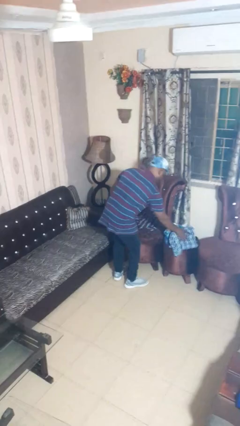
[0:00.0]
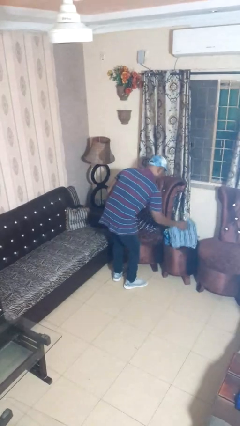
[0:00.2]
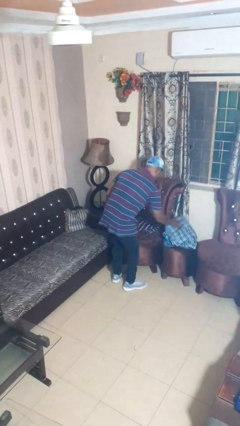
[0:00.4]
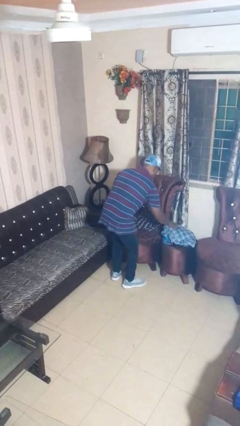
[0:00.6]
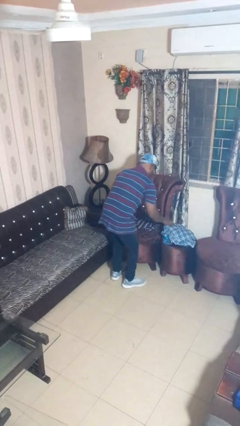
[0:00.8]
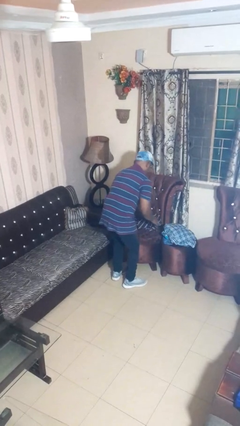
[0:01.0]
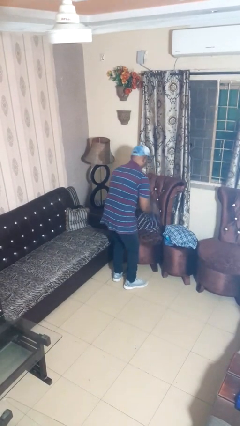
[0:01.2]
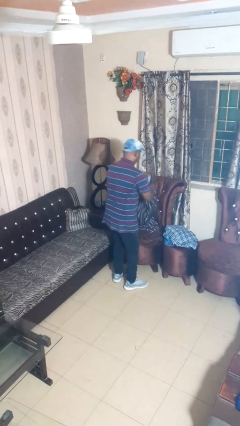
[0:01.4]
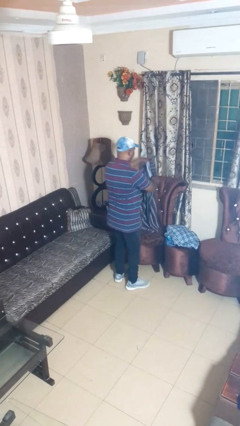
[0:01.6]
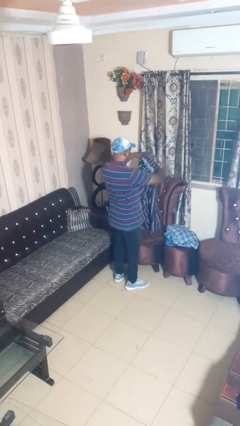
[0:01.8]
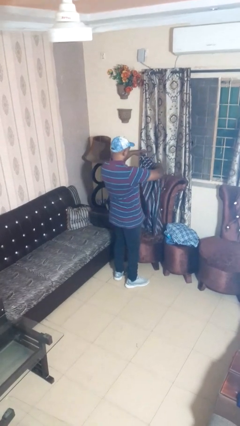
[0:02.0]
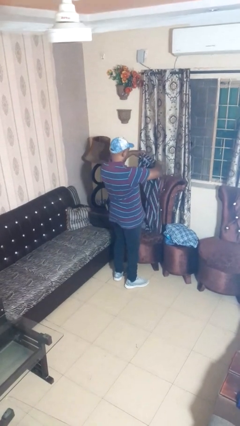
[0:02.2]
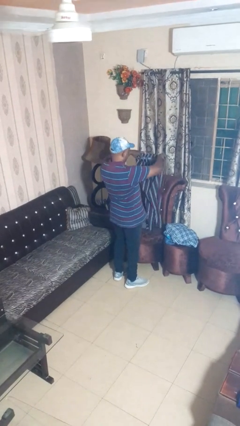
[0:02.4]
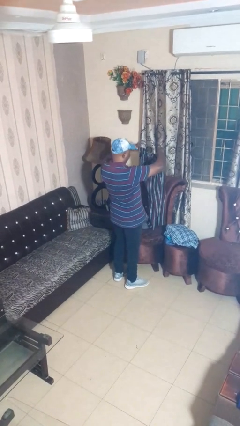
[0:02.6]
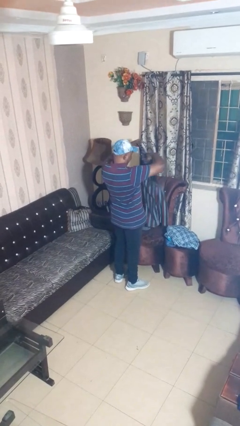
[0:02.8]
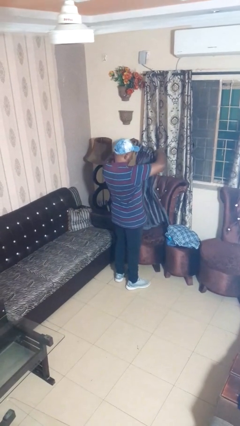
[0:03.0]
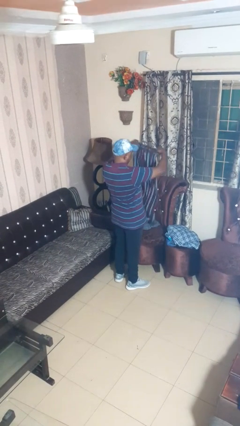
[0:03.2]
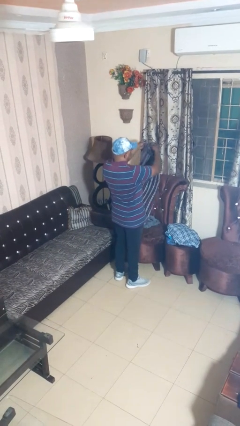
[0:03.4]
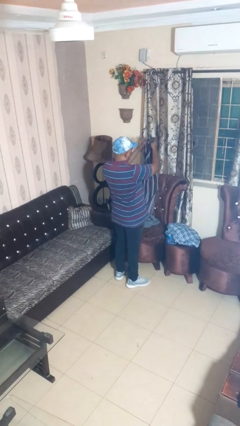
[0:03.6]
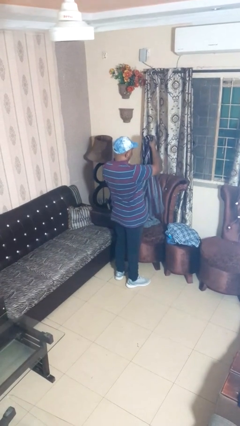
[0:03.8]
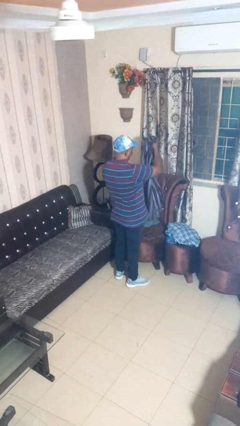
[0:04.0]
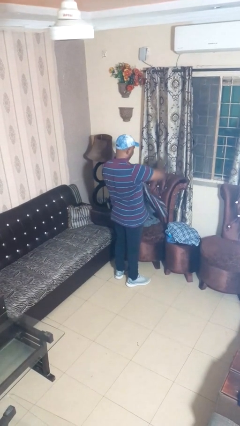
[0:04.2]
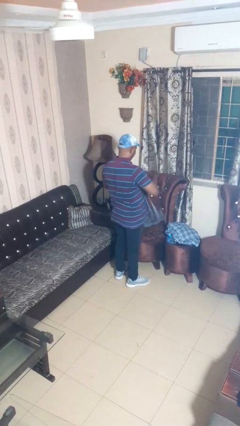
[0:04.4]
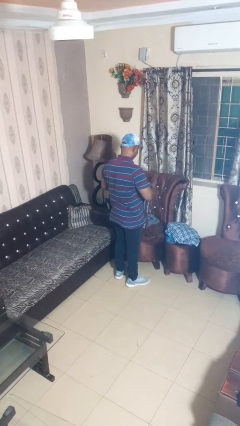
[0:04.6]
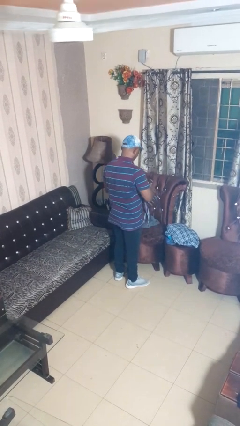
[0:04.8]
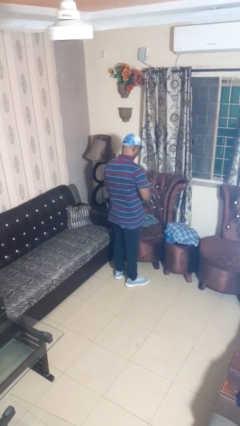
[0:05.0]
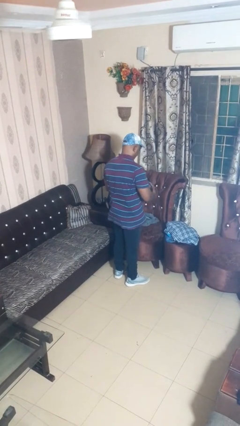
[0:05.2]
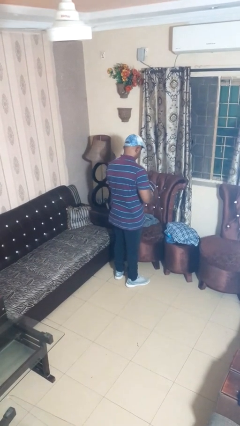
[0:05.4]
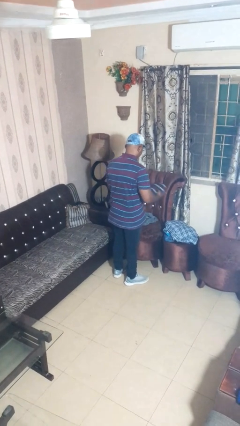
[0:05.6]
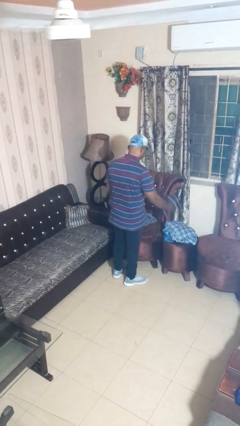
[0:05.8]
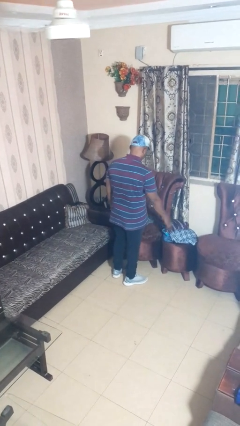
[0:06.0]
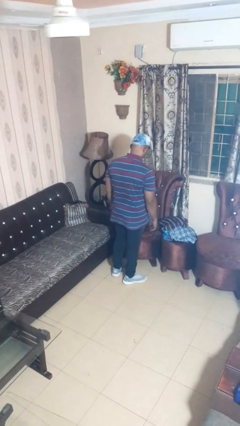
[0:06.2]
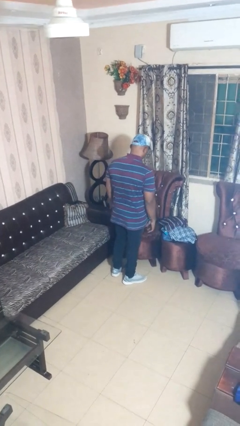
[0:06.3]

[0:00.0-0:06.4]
person folds pants

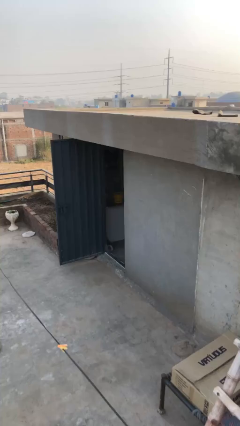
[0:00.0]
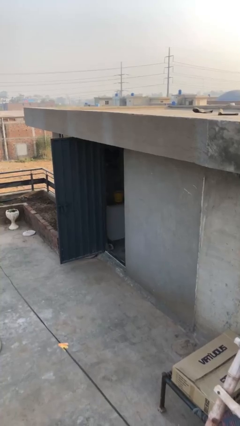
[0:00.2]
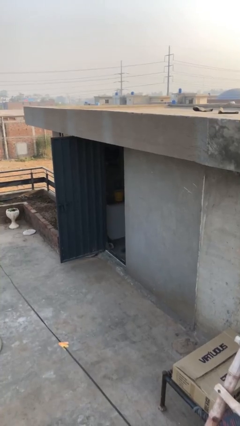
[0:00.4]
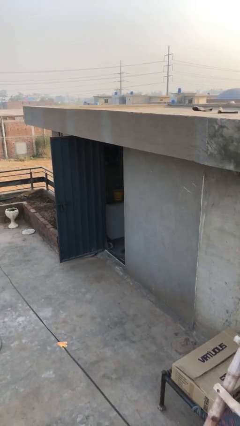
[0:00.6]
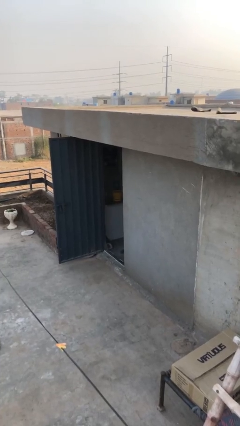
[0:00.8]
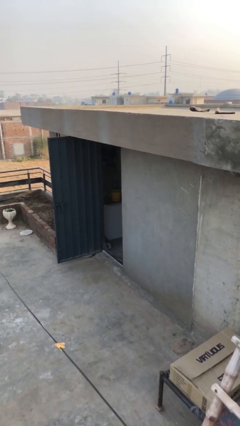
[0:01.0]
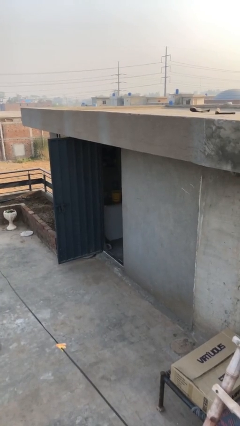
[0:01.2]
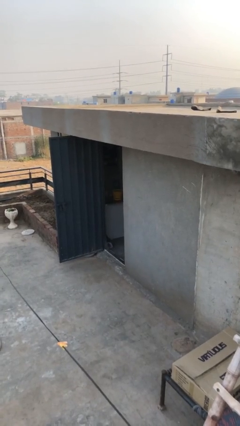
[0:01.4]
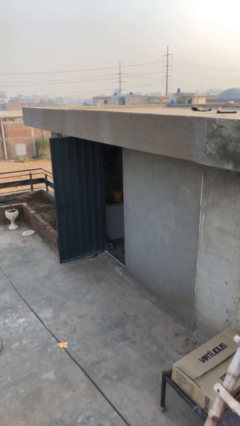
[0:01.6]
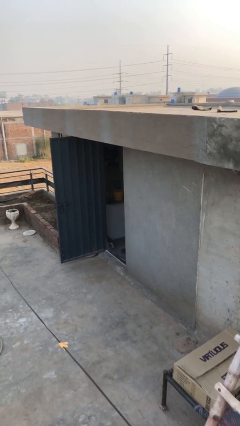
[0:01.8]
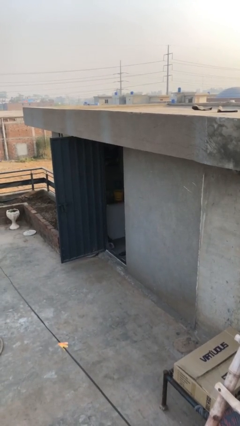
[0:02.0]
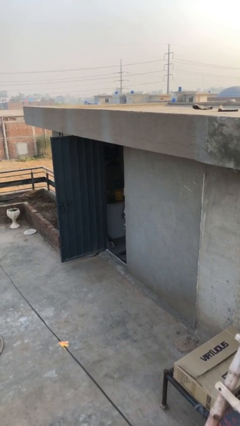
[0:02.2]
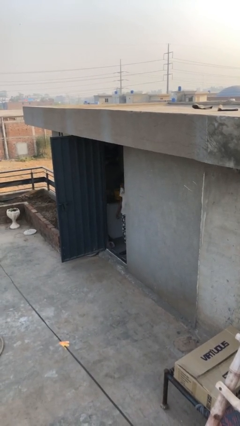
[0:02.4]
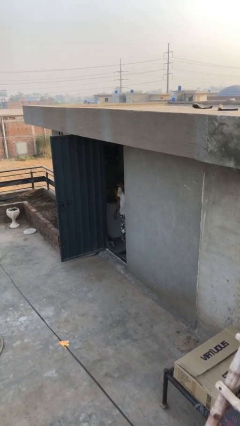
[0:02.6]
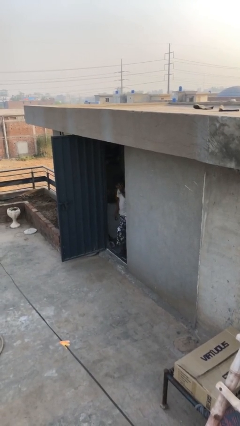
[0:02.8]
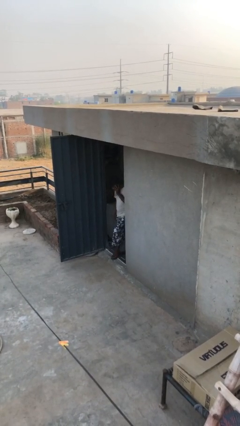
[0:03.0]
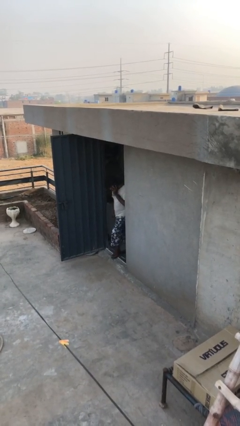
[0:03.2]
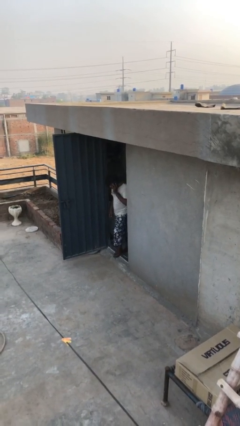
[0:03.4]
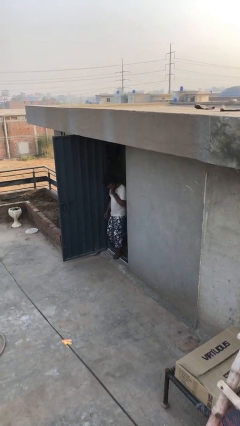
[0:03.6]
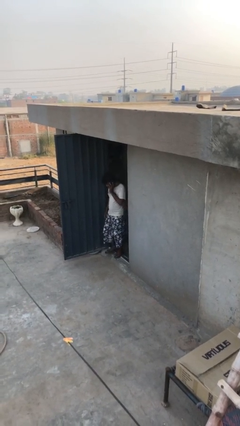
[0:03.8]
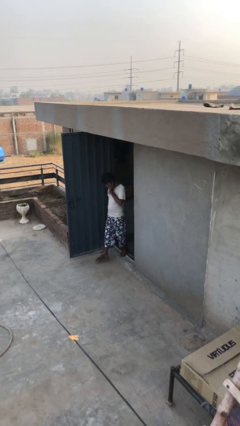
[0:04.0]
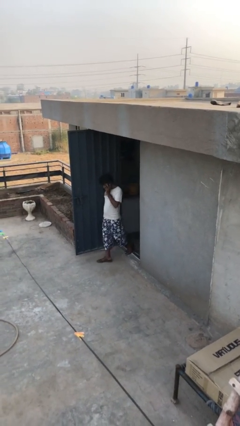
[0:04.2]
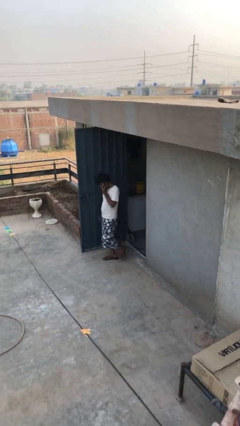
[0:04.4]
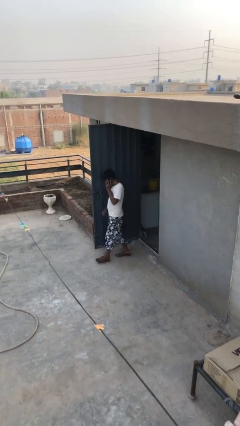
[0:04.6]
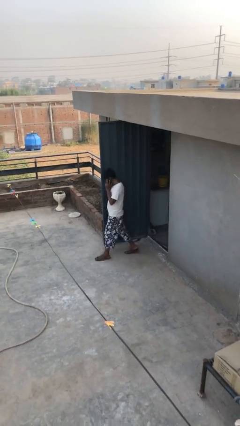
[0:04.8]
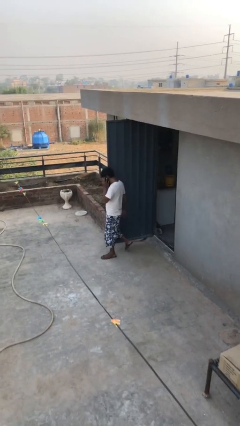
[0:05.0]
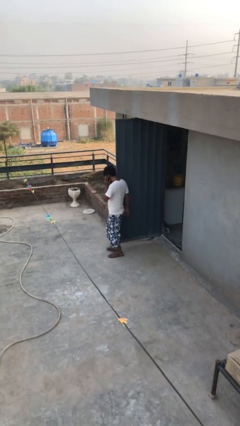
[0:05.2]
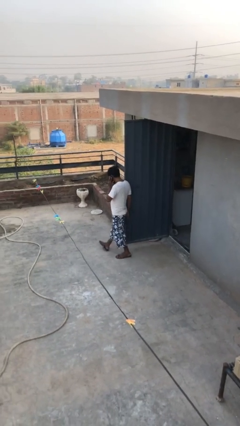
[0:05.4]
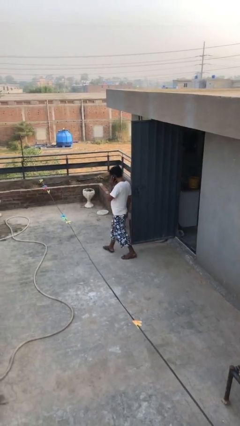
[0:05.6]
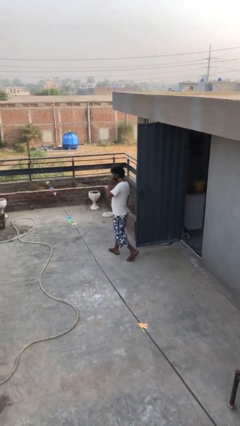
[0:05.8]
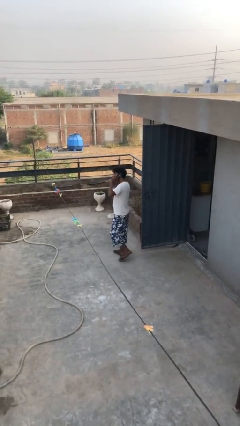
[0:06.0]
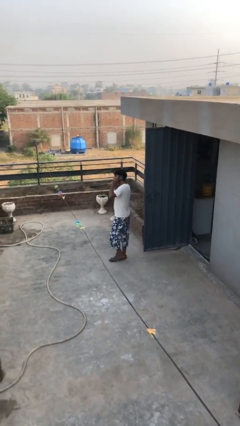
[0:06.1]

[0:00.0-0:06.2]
person enters scene through structure

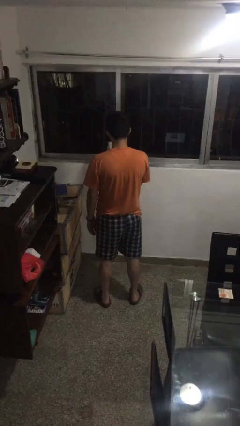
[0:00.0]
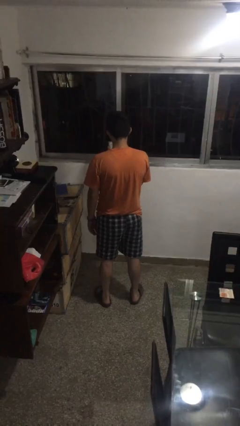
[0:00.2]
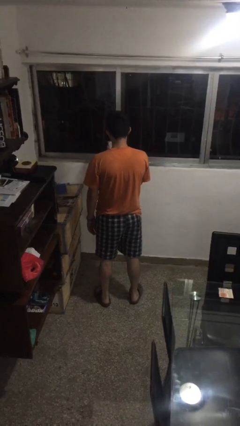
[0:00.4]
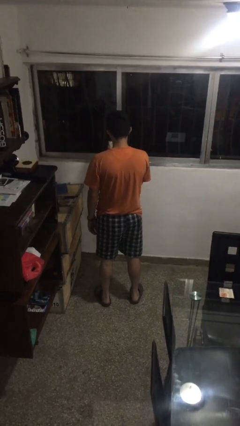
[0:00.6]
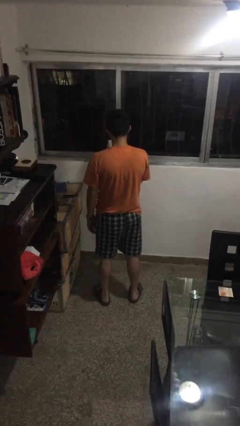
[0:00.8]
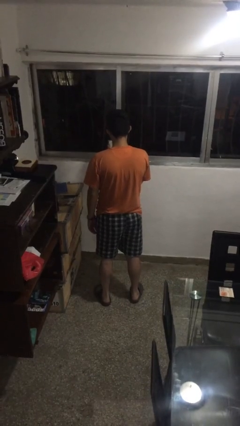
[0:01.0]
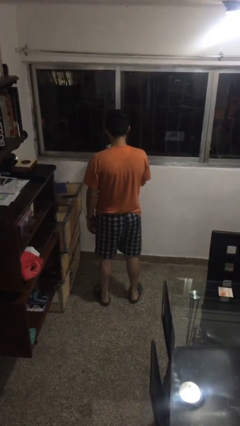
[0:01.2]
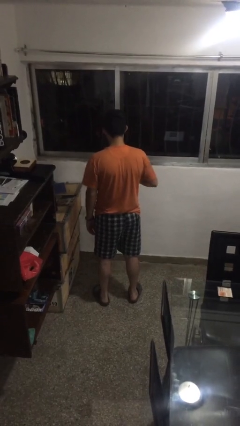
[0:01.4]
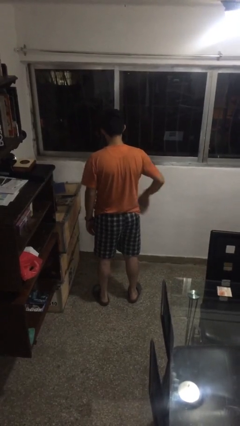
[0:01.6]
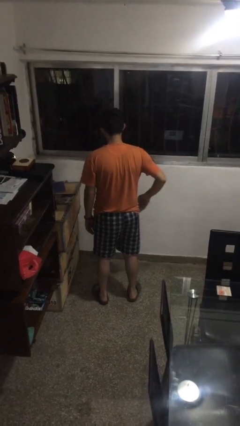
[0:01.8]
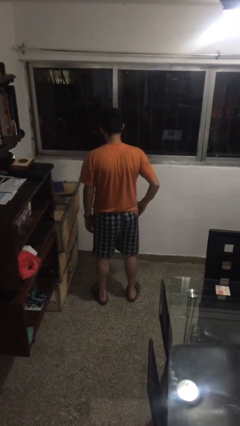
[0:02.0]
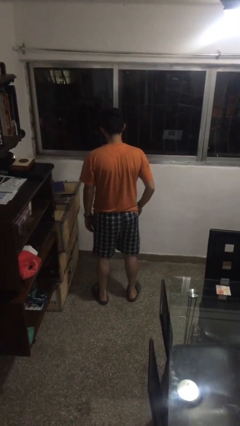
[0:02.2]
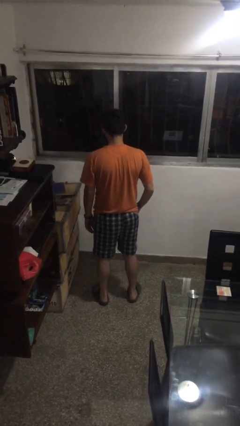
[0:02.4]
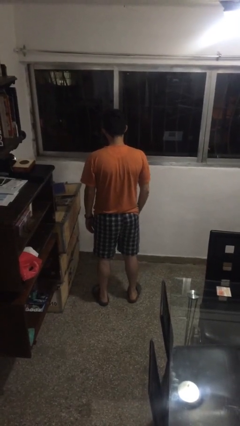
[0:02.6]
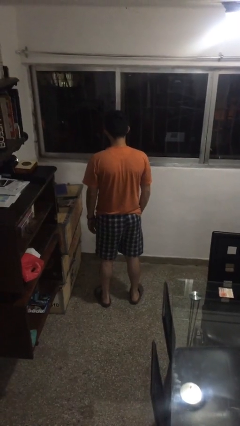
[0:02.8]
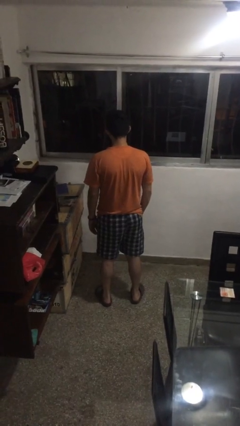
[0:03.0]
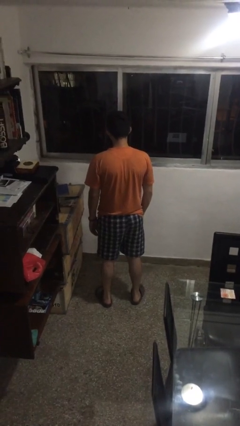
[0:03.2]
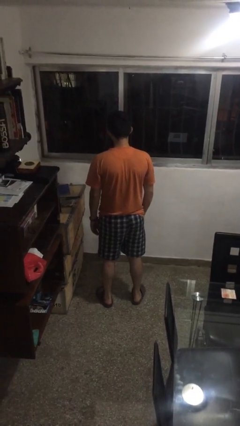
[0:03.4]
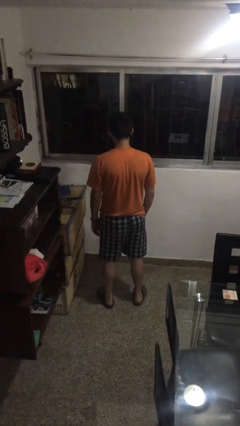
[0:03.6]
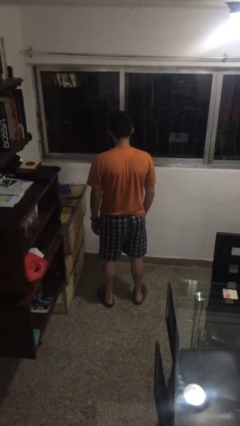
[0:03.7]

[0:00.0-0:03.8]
person puts phone into pocket

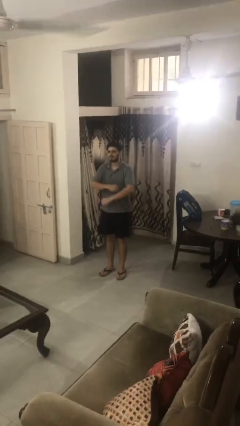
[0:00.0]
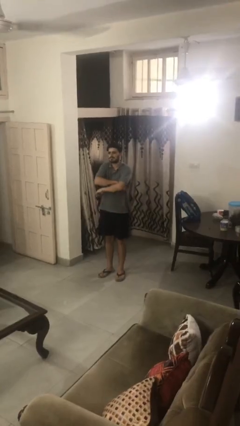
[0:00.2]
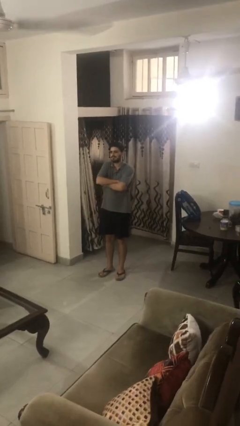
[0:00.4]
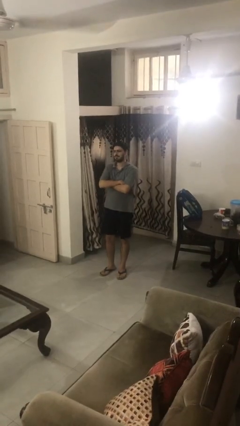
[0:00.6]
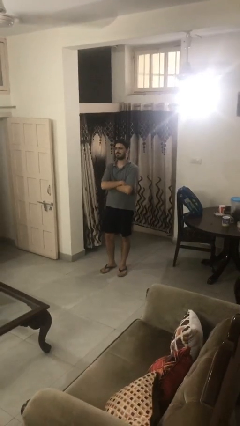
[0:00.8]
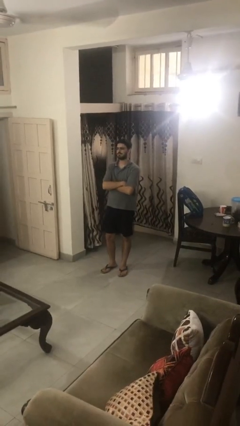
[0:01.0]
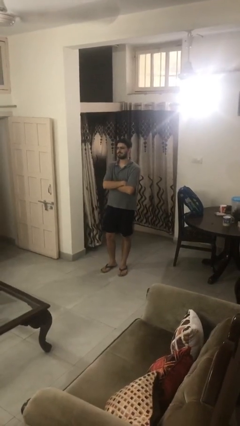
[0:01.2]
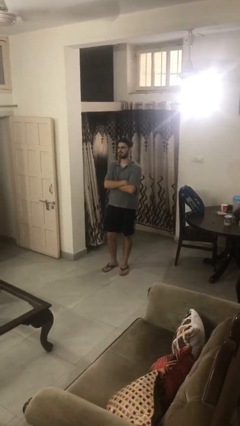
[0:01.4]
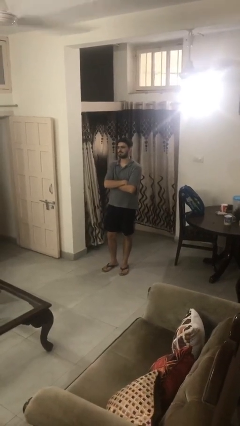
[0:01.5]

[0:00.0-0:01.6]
person crosses arms
